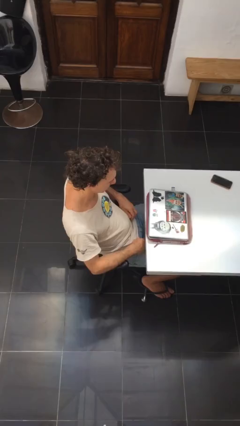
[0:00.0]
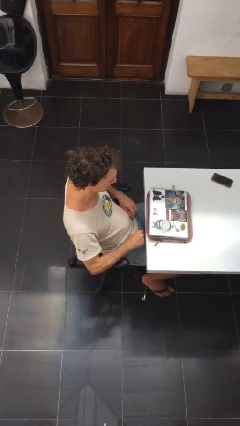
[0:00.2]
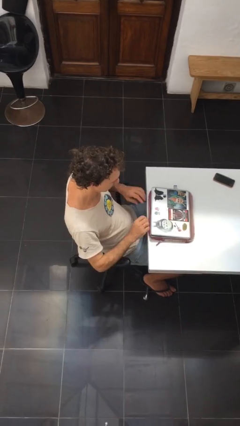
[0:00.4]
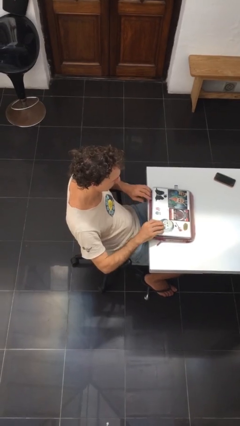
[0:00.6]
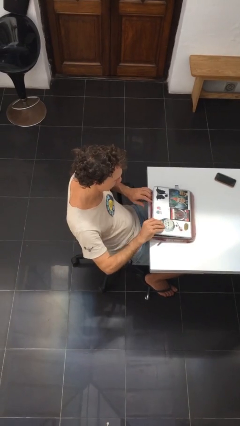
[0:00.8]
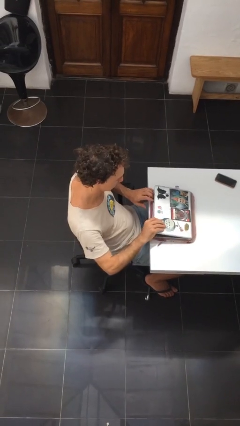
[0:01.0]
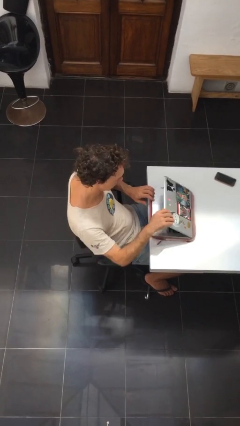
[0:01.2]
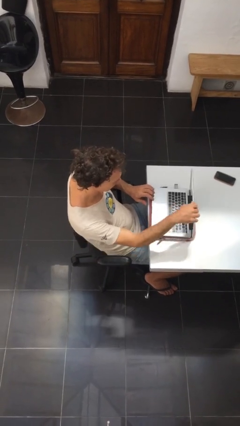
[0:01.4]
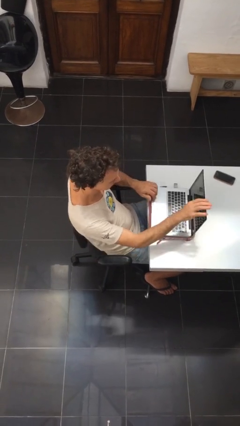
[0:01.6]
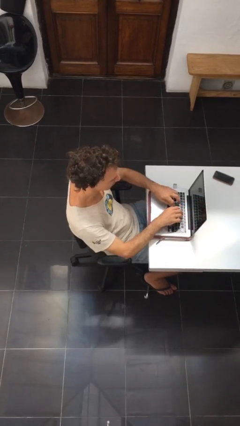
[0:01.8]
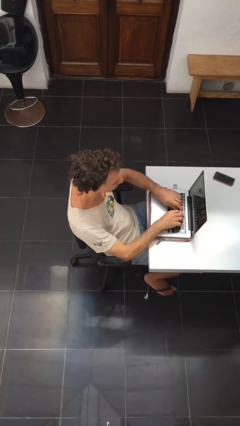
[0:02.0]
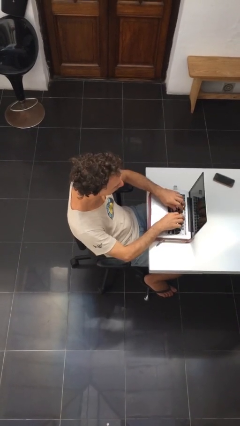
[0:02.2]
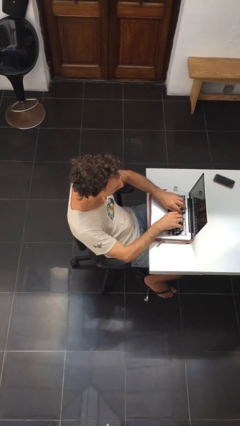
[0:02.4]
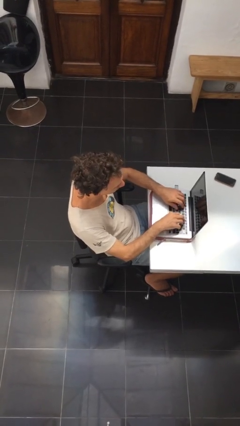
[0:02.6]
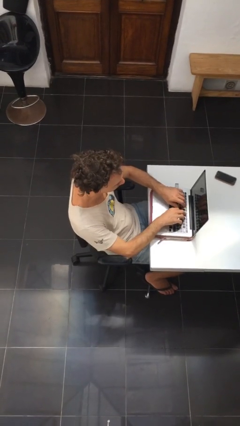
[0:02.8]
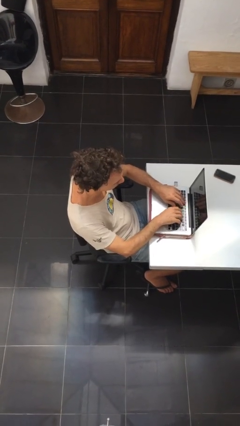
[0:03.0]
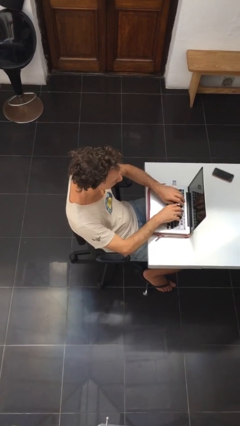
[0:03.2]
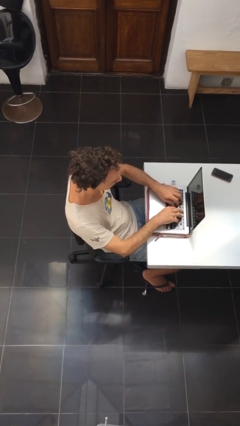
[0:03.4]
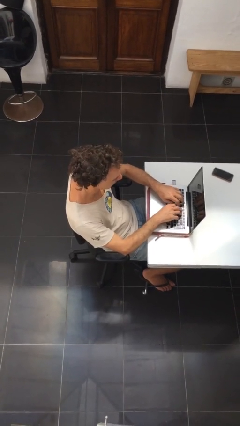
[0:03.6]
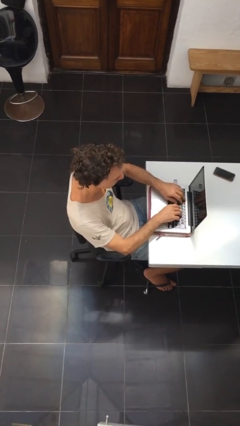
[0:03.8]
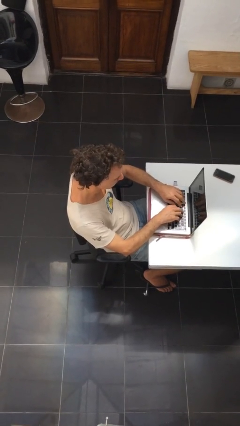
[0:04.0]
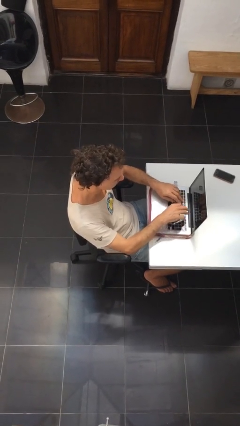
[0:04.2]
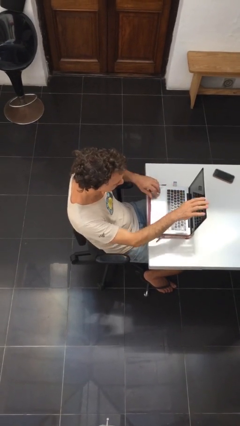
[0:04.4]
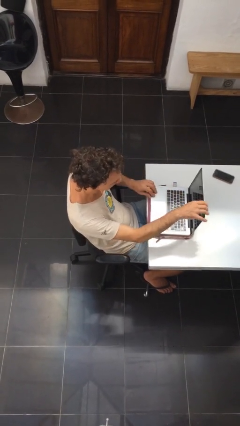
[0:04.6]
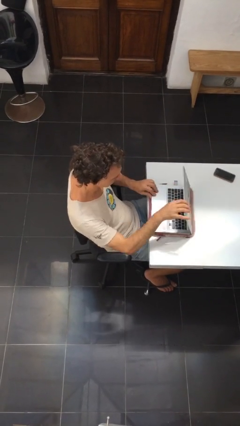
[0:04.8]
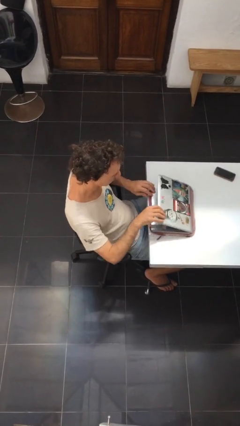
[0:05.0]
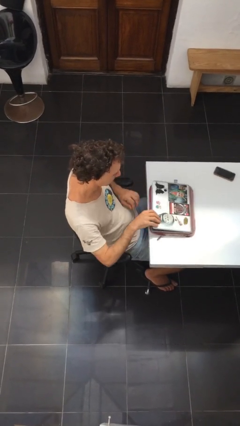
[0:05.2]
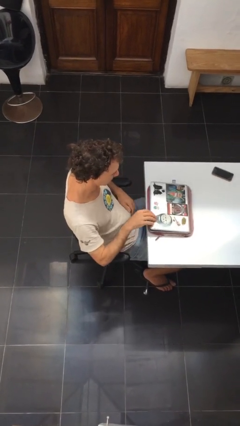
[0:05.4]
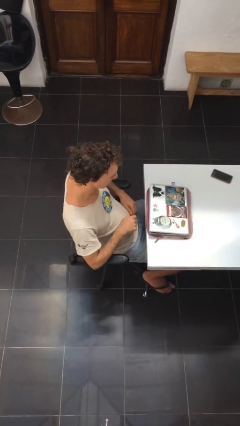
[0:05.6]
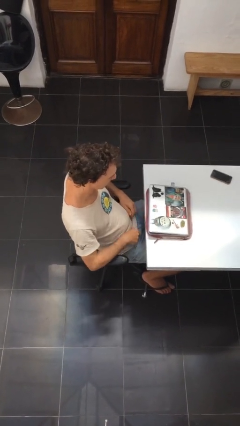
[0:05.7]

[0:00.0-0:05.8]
person interacts with laptop

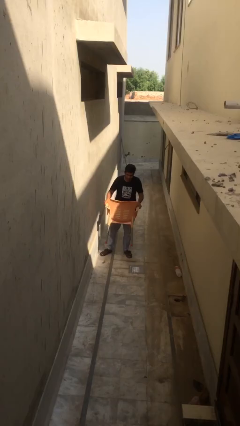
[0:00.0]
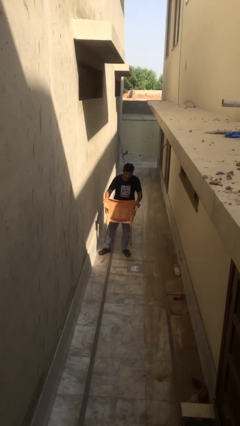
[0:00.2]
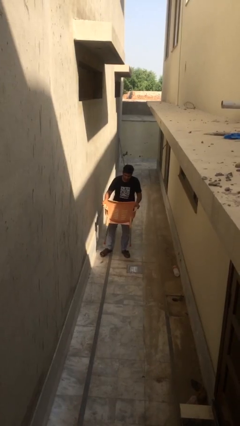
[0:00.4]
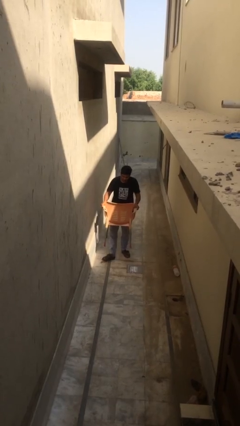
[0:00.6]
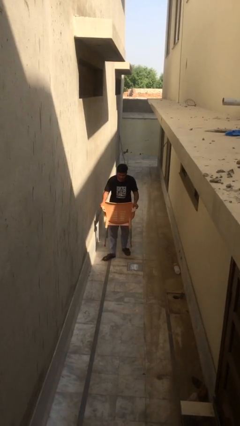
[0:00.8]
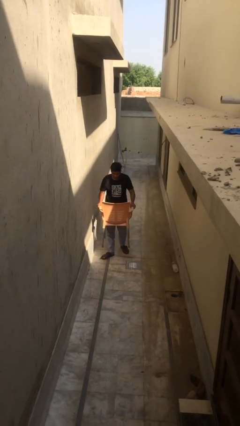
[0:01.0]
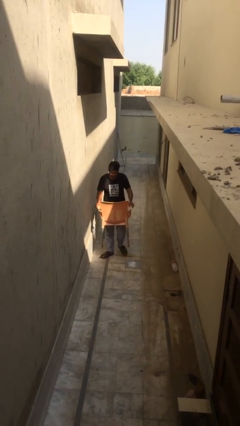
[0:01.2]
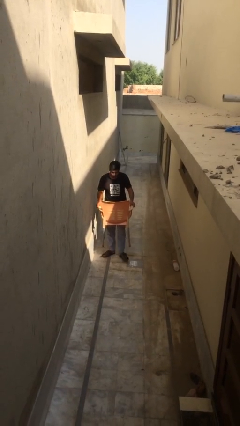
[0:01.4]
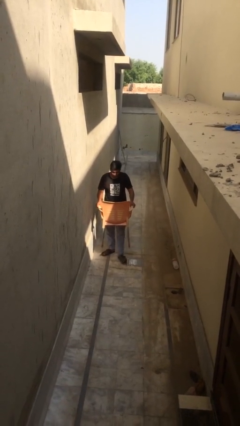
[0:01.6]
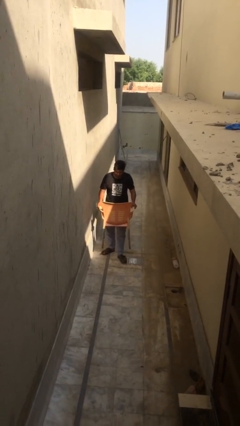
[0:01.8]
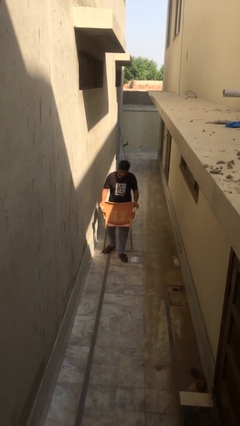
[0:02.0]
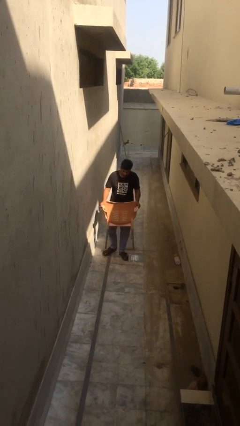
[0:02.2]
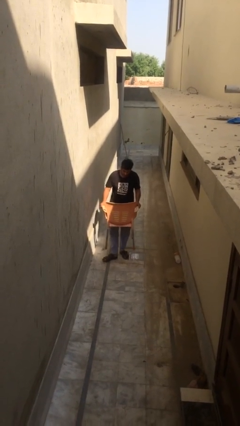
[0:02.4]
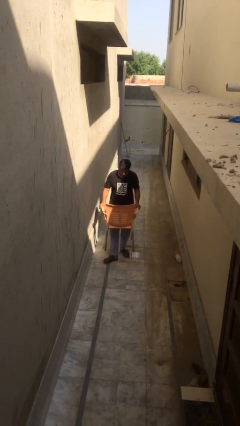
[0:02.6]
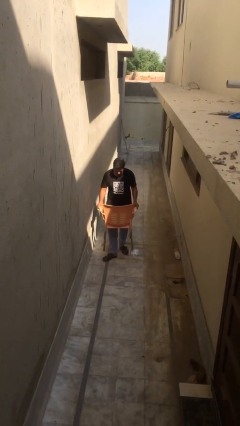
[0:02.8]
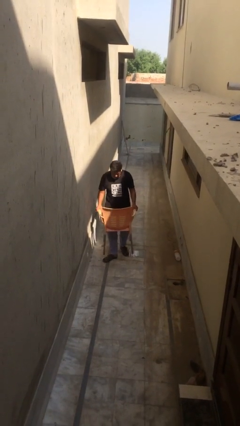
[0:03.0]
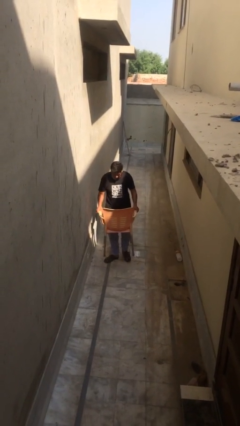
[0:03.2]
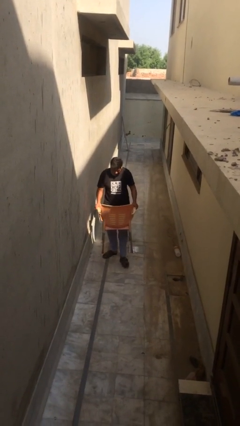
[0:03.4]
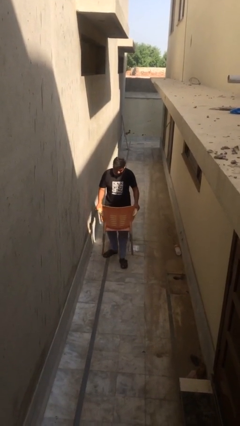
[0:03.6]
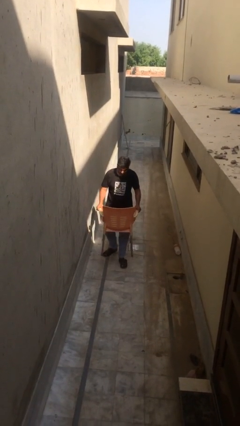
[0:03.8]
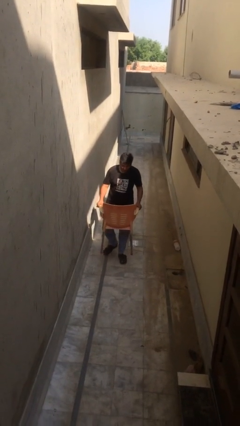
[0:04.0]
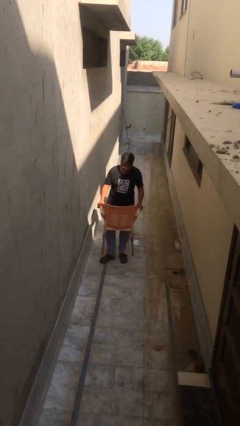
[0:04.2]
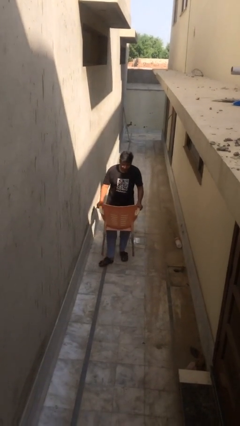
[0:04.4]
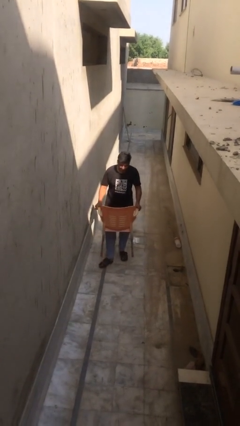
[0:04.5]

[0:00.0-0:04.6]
person carries heavy object

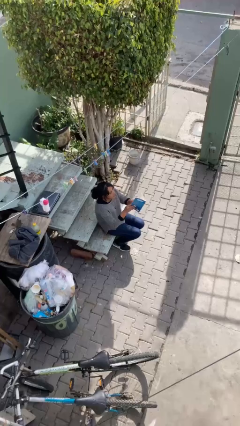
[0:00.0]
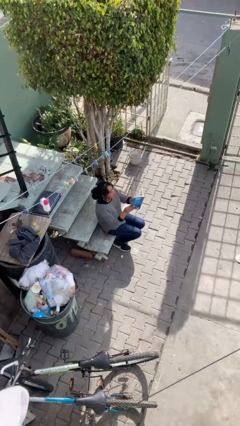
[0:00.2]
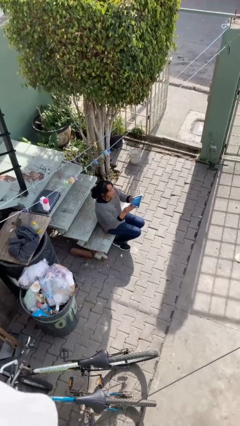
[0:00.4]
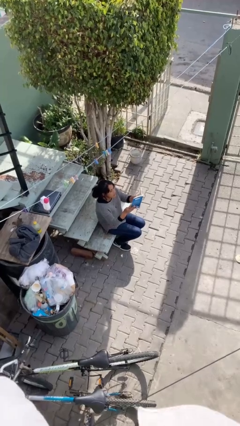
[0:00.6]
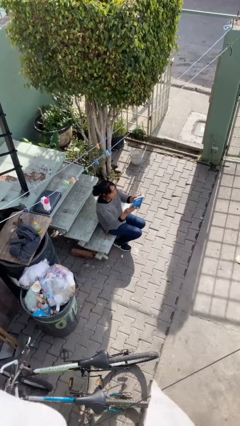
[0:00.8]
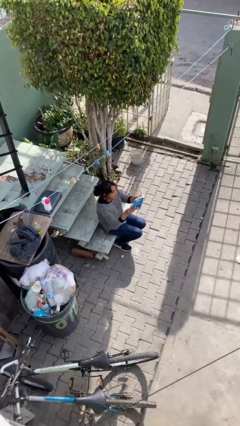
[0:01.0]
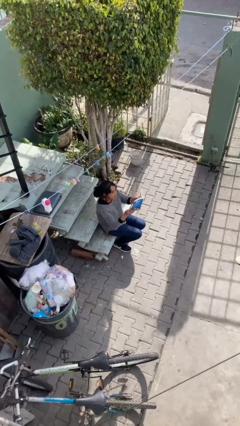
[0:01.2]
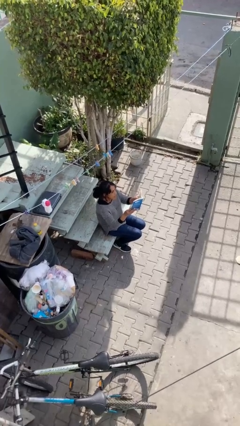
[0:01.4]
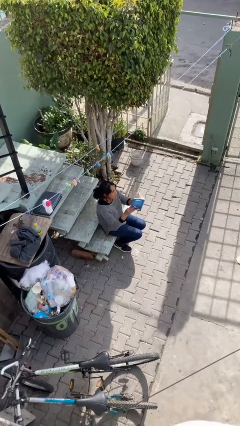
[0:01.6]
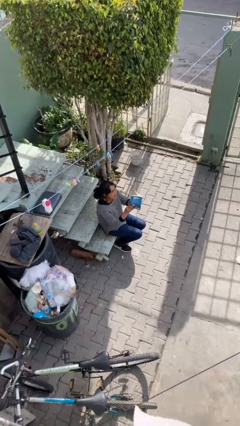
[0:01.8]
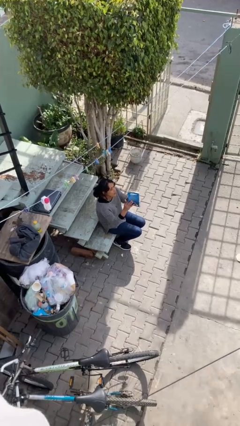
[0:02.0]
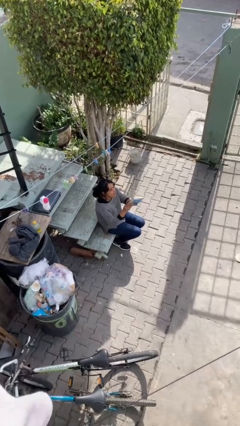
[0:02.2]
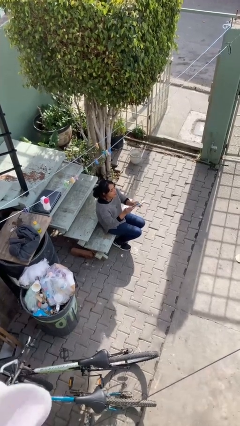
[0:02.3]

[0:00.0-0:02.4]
person reads document

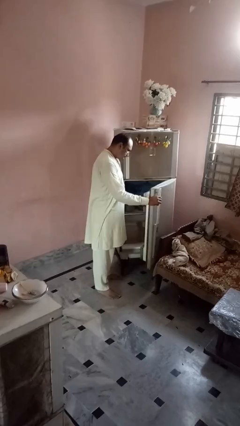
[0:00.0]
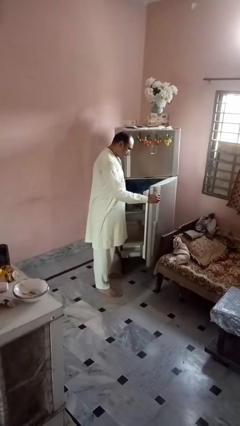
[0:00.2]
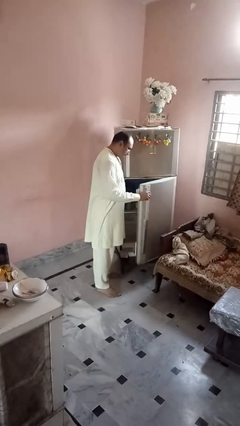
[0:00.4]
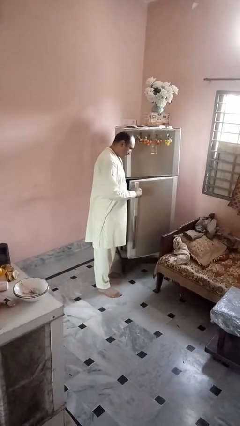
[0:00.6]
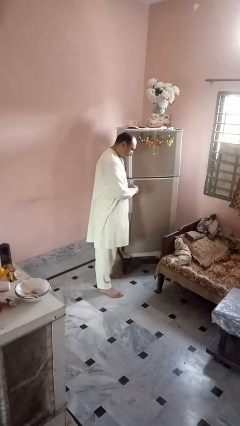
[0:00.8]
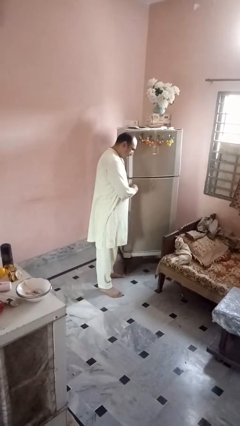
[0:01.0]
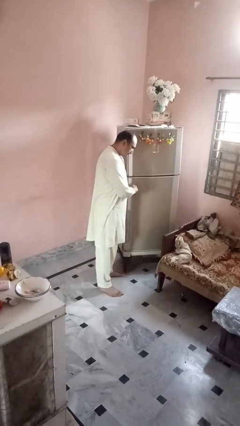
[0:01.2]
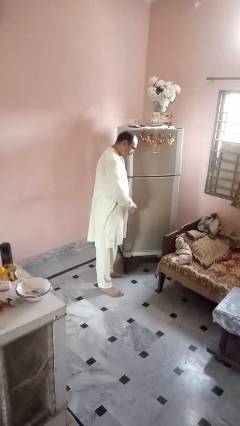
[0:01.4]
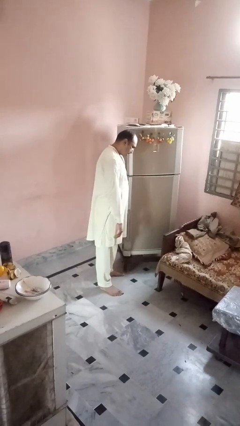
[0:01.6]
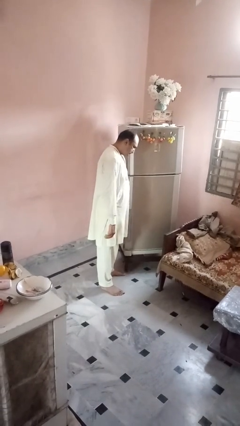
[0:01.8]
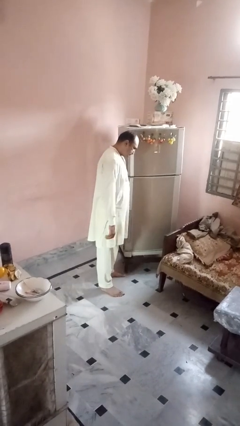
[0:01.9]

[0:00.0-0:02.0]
person closes refrigerator

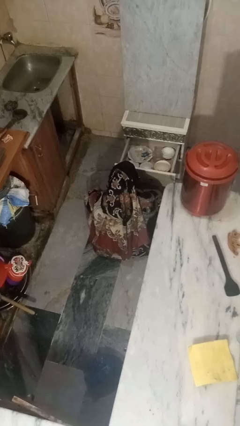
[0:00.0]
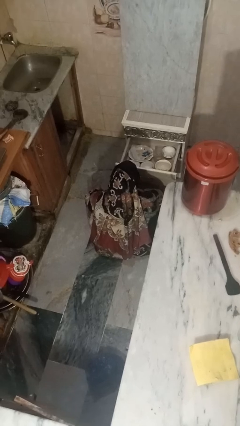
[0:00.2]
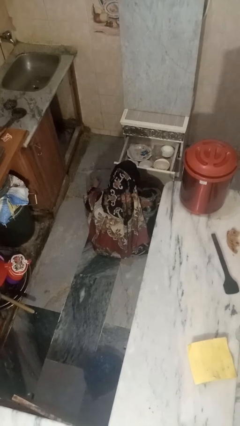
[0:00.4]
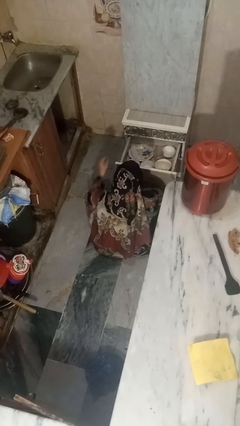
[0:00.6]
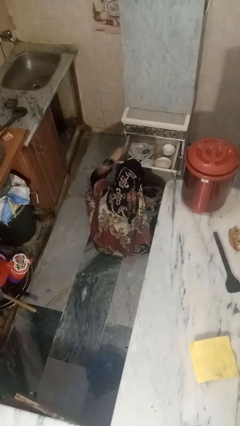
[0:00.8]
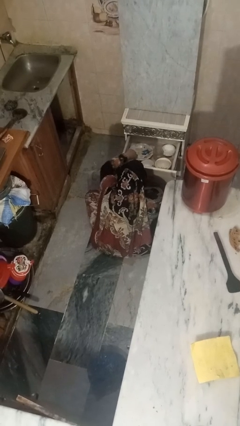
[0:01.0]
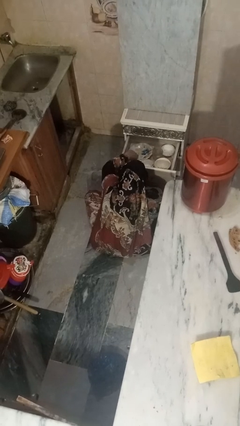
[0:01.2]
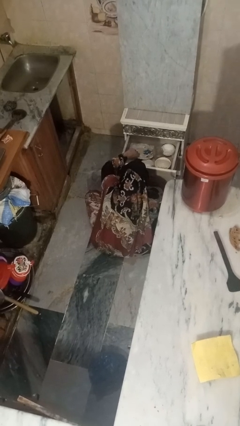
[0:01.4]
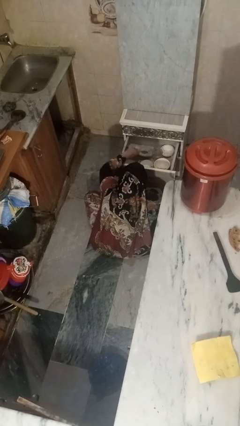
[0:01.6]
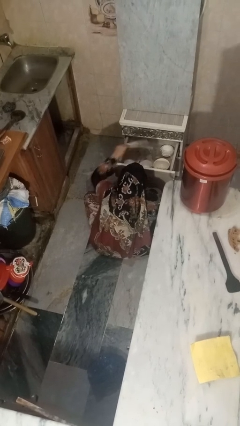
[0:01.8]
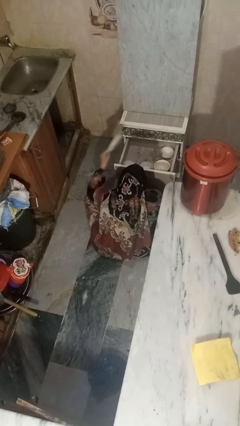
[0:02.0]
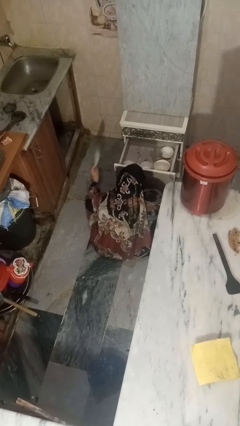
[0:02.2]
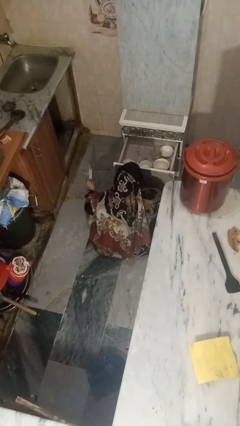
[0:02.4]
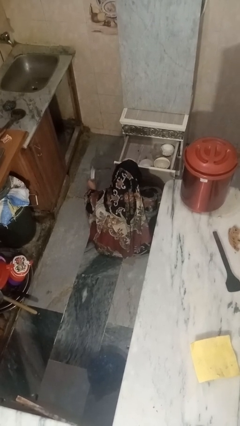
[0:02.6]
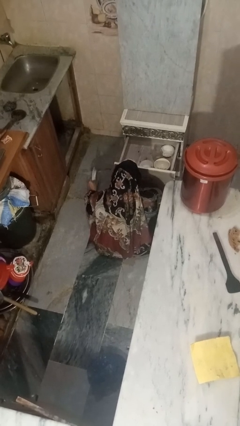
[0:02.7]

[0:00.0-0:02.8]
person takes object from kitchen drawer
